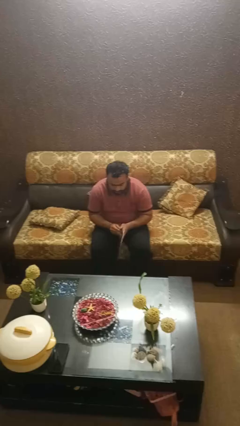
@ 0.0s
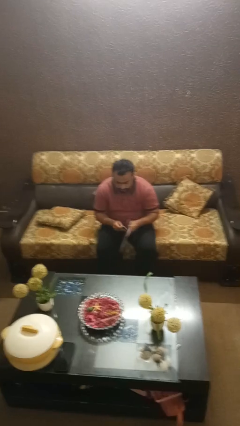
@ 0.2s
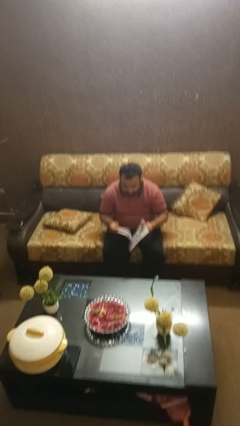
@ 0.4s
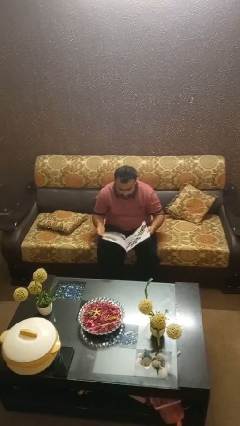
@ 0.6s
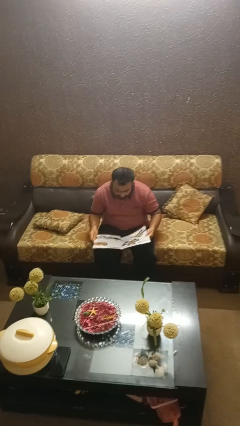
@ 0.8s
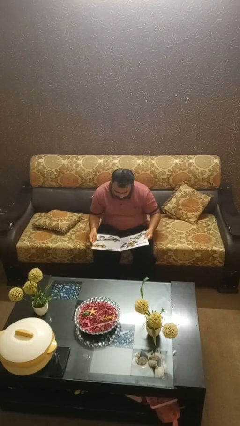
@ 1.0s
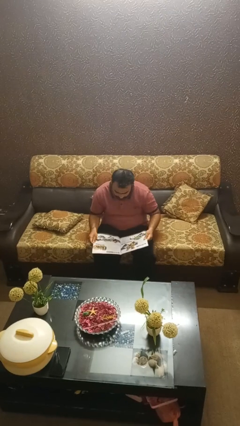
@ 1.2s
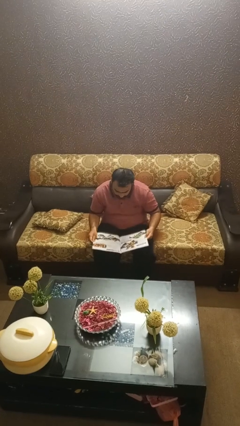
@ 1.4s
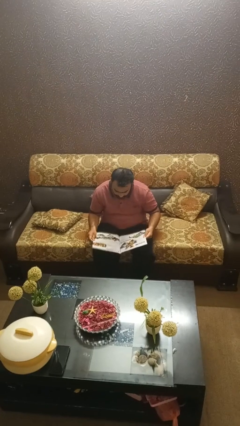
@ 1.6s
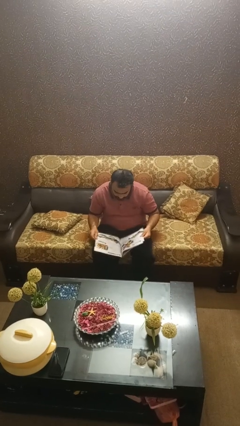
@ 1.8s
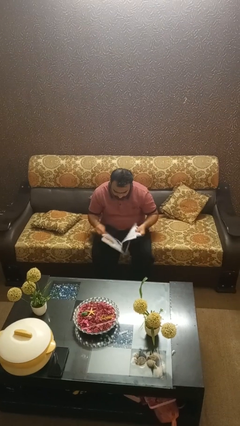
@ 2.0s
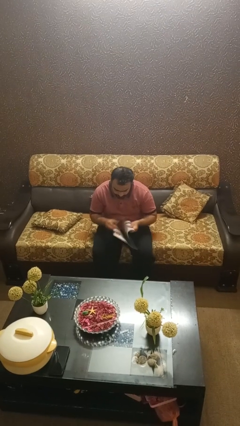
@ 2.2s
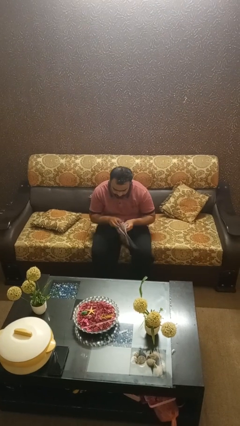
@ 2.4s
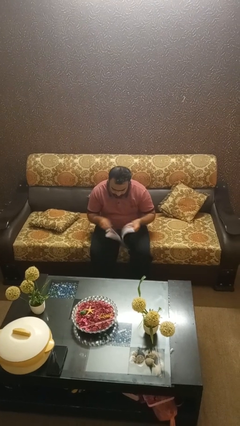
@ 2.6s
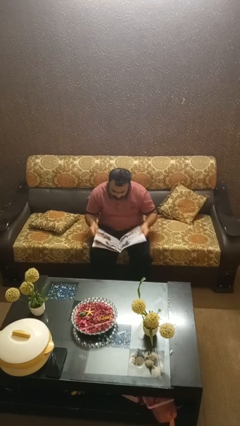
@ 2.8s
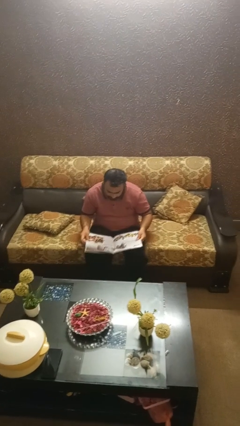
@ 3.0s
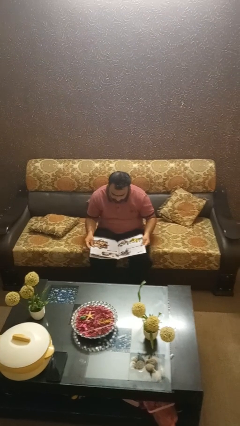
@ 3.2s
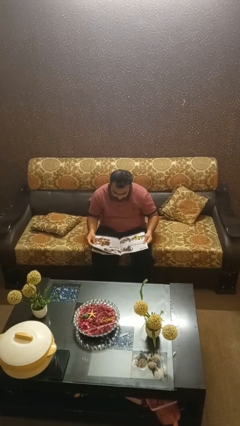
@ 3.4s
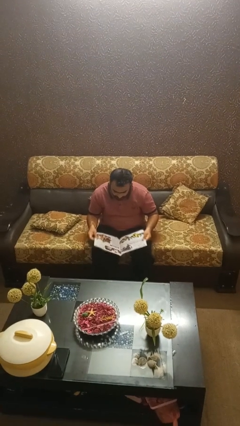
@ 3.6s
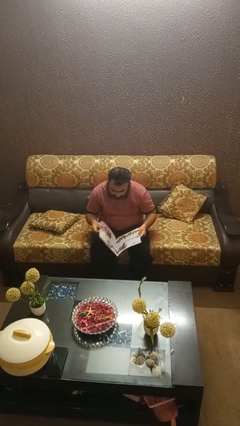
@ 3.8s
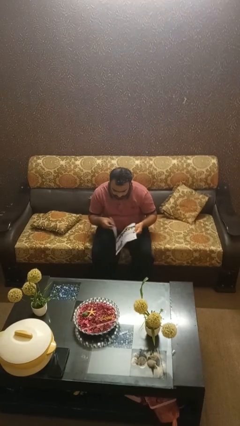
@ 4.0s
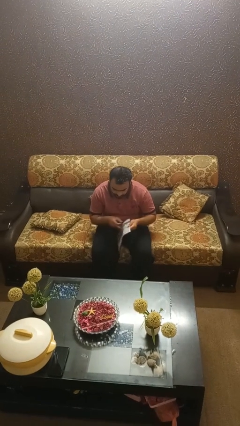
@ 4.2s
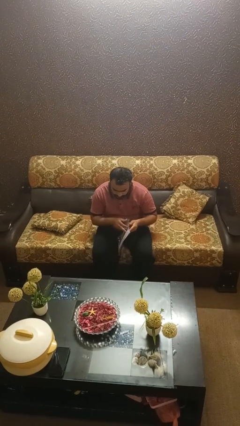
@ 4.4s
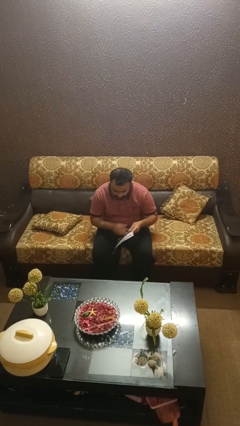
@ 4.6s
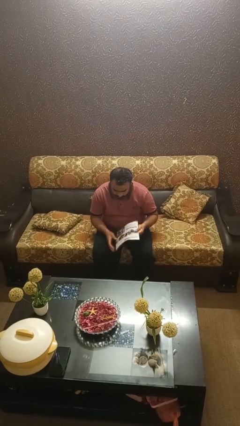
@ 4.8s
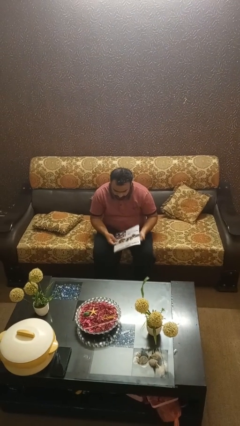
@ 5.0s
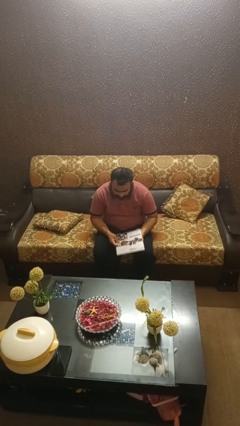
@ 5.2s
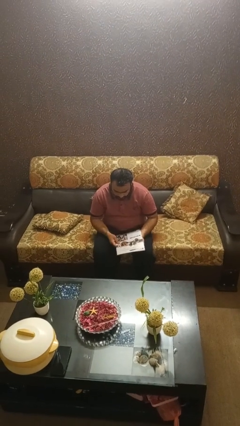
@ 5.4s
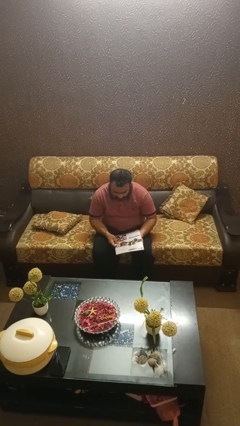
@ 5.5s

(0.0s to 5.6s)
person reads magazine

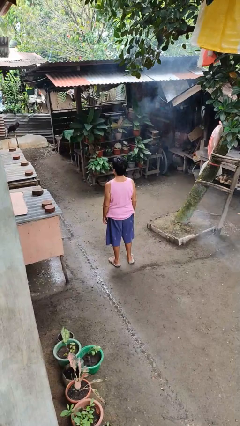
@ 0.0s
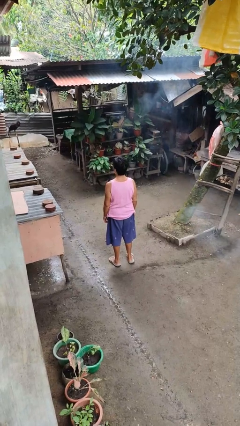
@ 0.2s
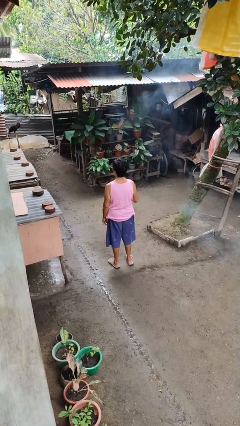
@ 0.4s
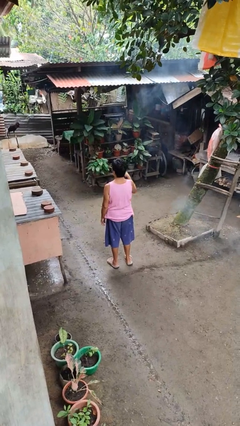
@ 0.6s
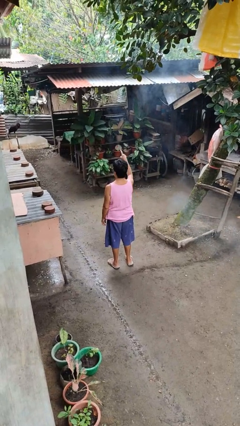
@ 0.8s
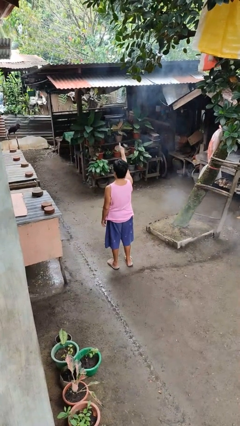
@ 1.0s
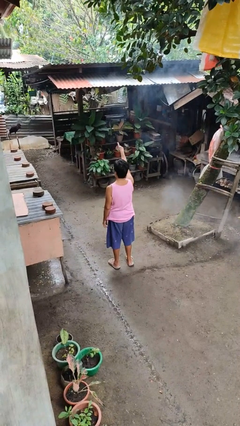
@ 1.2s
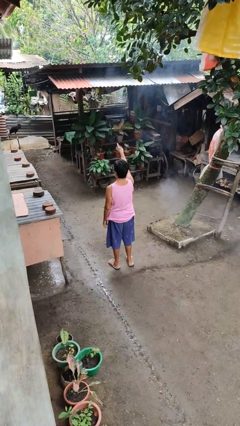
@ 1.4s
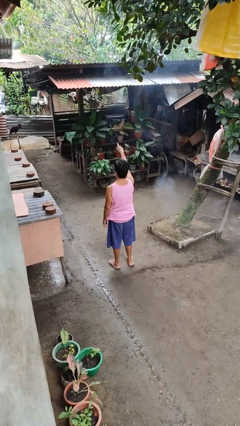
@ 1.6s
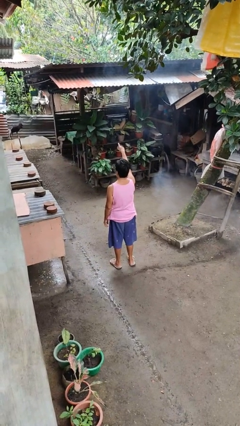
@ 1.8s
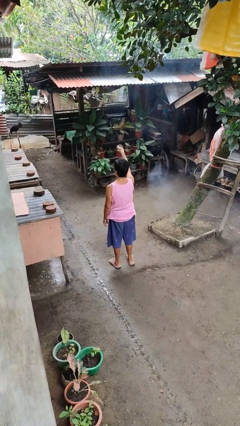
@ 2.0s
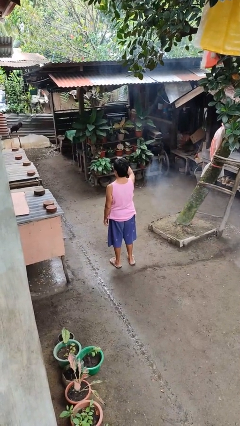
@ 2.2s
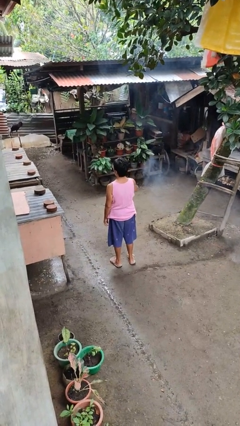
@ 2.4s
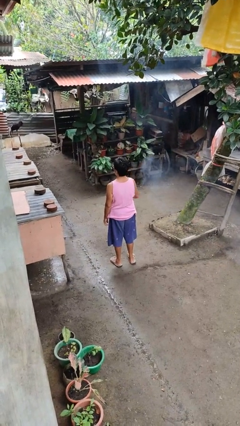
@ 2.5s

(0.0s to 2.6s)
person points at person

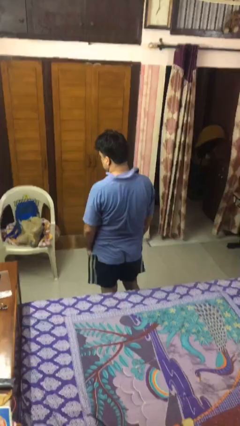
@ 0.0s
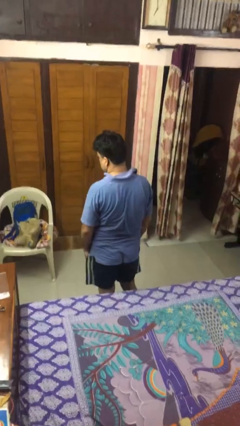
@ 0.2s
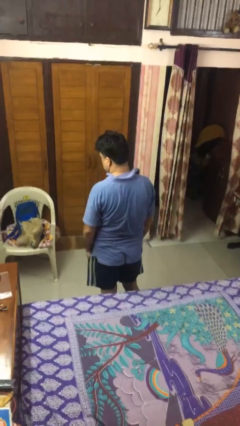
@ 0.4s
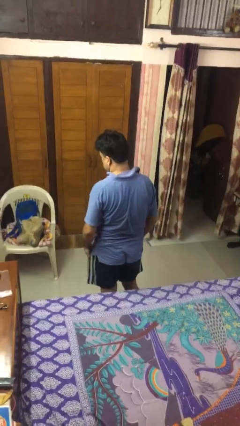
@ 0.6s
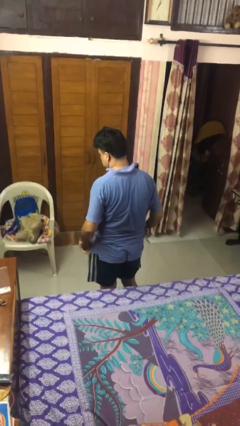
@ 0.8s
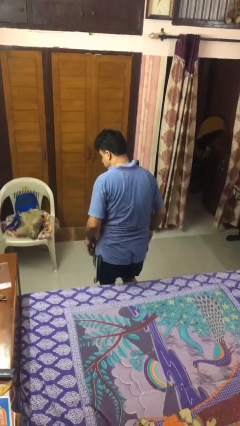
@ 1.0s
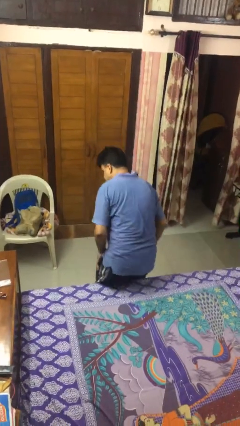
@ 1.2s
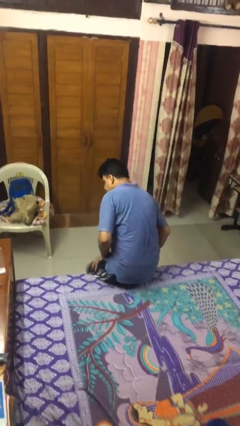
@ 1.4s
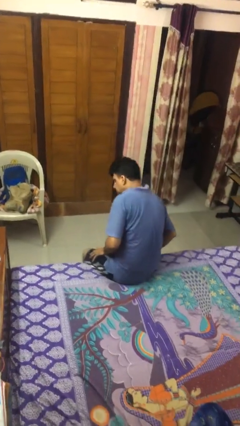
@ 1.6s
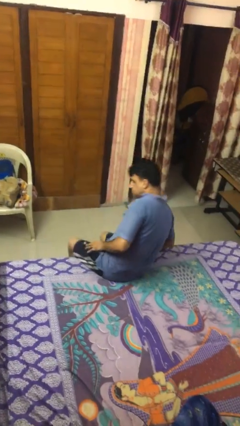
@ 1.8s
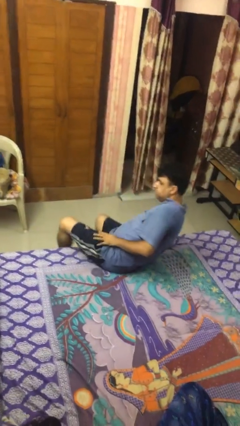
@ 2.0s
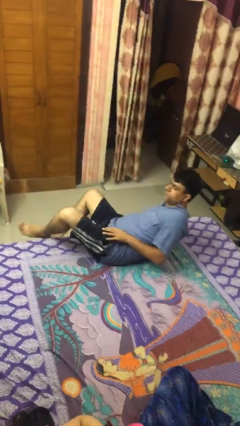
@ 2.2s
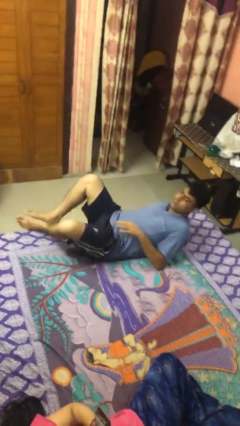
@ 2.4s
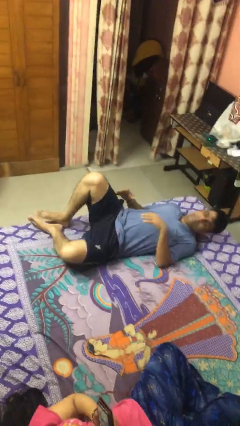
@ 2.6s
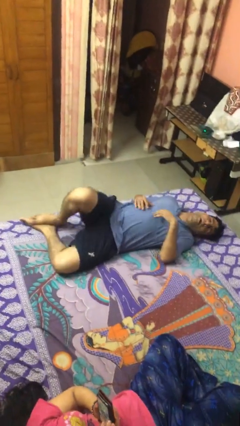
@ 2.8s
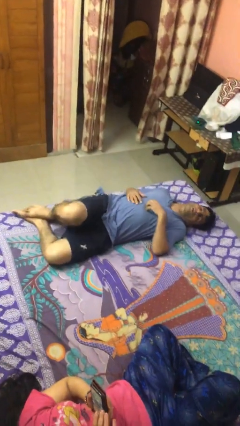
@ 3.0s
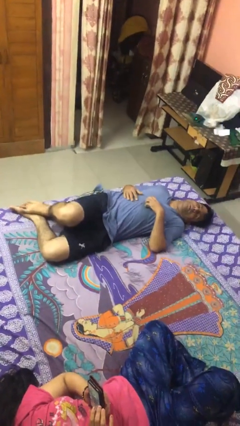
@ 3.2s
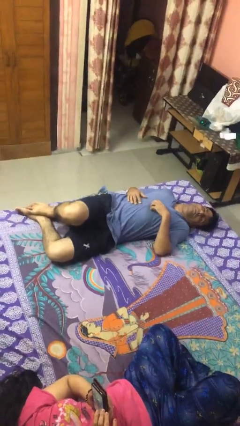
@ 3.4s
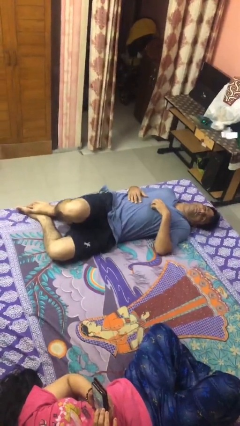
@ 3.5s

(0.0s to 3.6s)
person lies down on bed

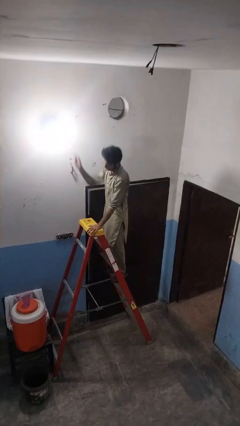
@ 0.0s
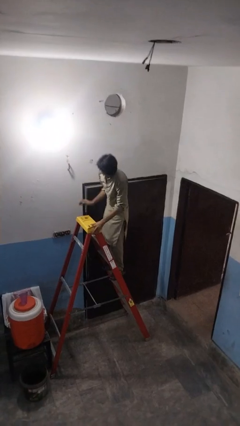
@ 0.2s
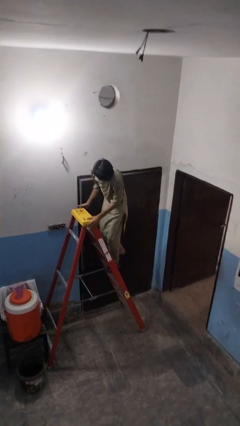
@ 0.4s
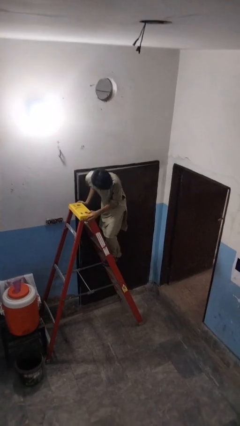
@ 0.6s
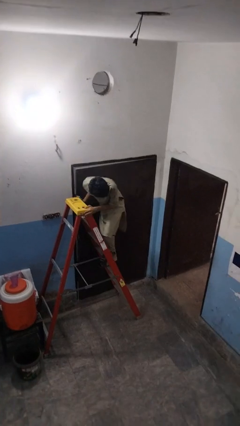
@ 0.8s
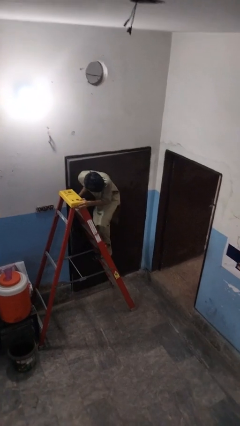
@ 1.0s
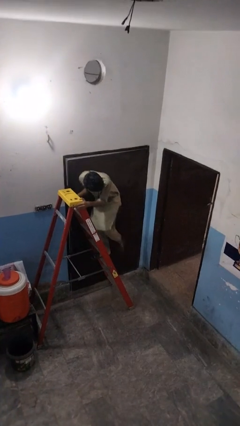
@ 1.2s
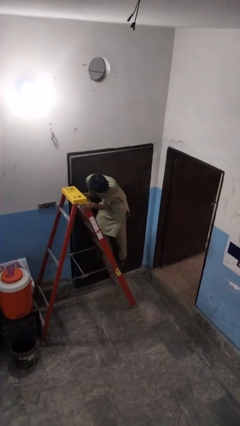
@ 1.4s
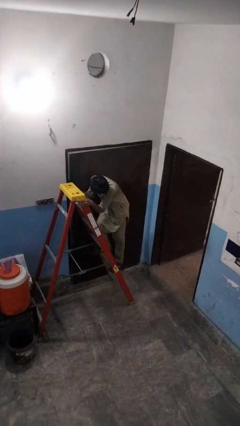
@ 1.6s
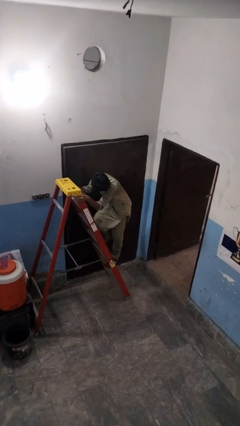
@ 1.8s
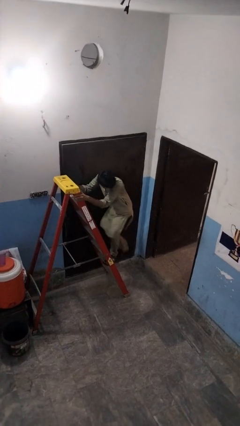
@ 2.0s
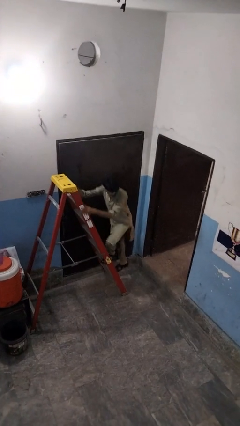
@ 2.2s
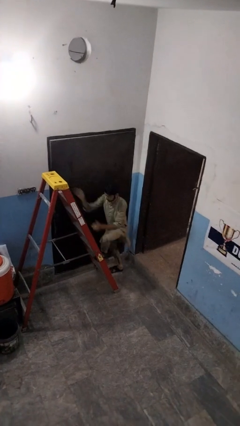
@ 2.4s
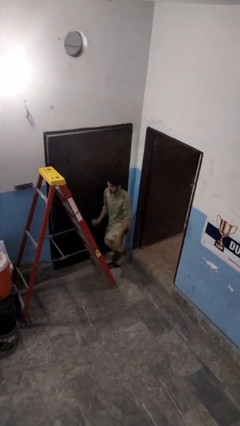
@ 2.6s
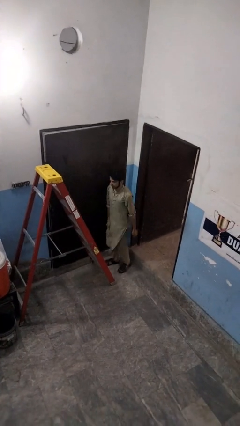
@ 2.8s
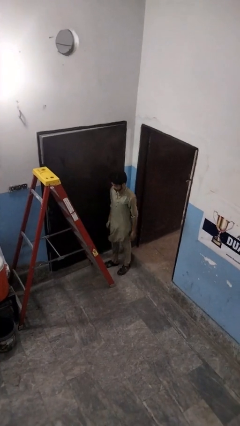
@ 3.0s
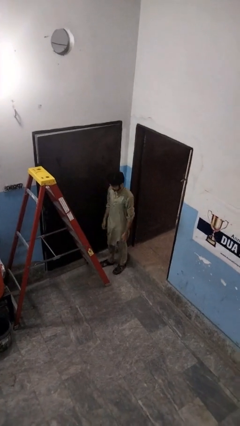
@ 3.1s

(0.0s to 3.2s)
person climbs down ladder

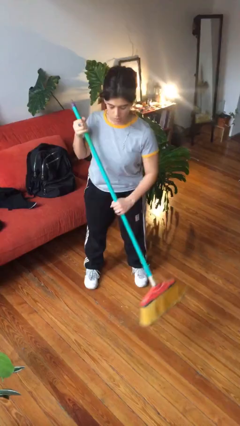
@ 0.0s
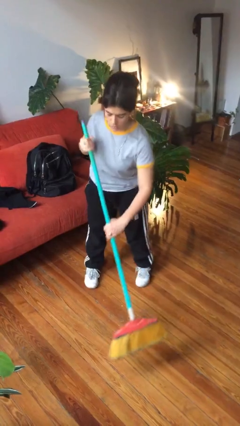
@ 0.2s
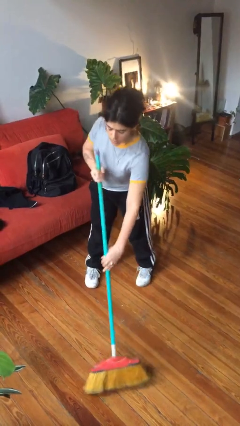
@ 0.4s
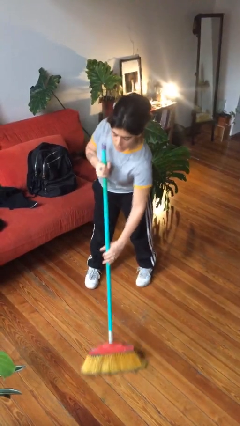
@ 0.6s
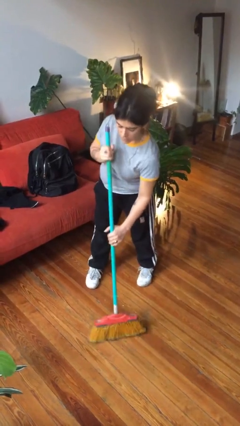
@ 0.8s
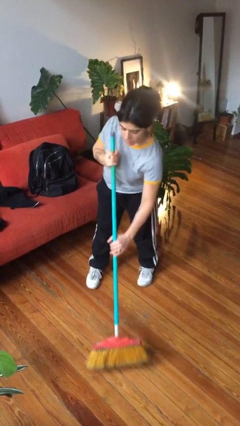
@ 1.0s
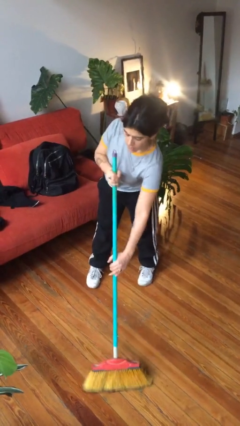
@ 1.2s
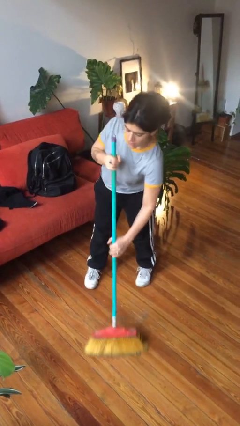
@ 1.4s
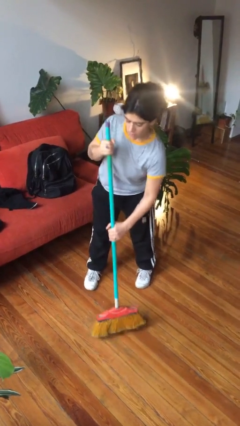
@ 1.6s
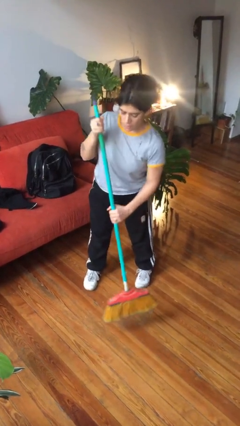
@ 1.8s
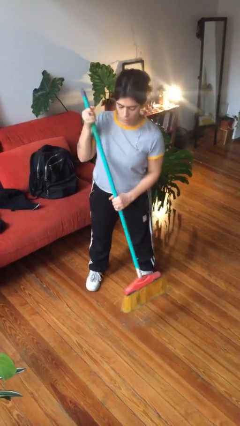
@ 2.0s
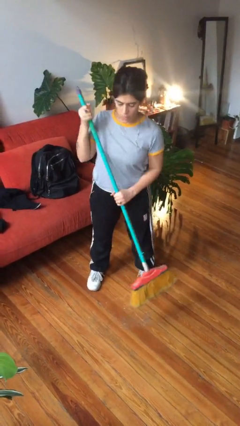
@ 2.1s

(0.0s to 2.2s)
person sweeps floor

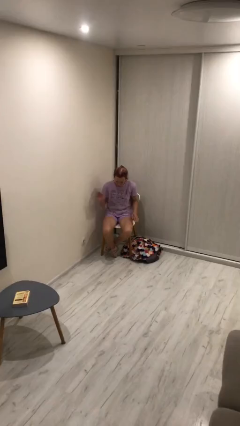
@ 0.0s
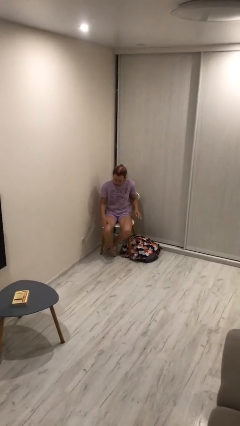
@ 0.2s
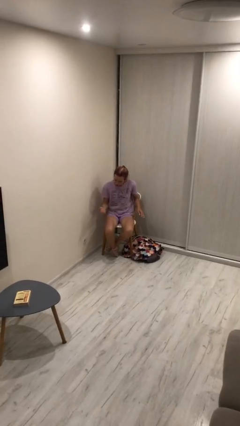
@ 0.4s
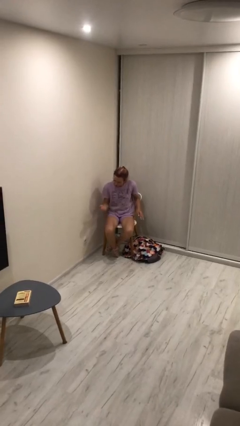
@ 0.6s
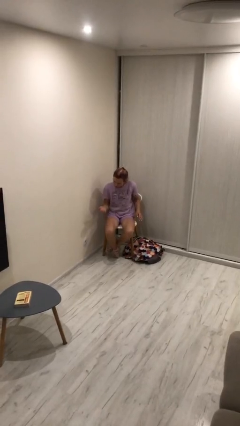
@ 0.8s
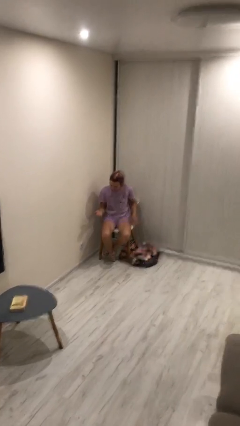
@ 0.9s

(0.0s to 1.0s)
person swats bug
